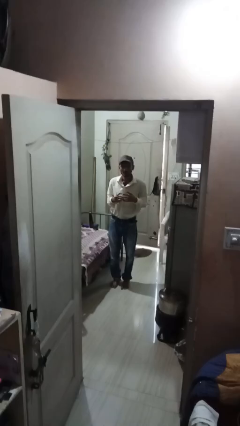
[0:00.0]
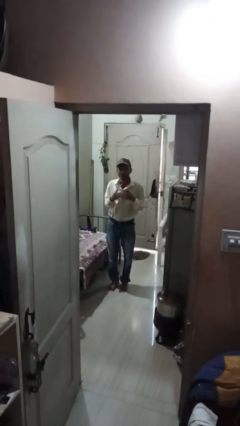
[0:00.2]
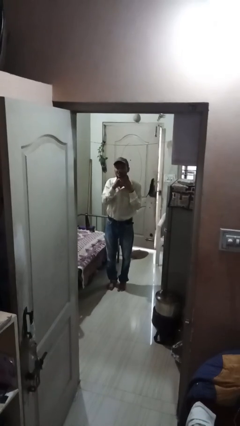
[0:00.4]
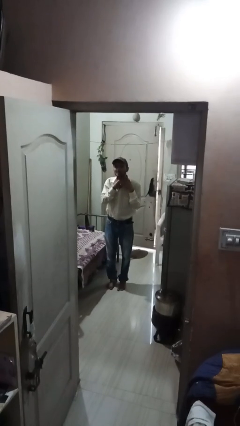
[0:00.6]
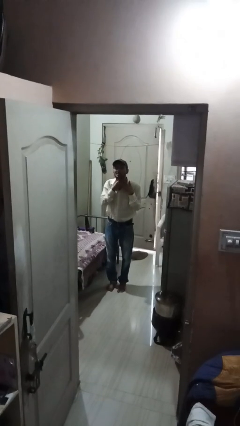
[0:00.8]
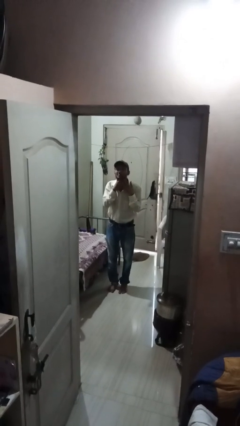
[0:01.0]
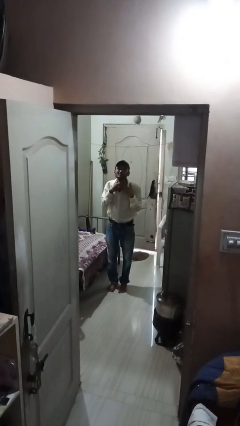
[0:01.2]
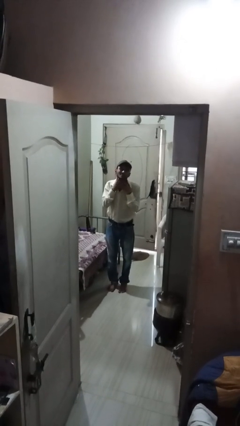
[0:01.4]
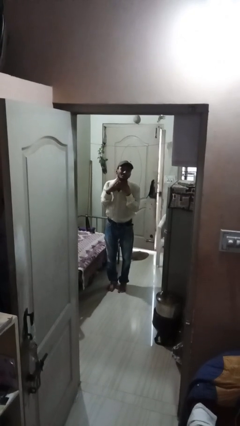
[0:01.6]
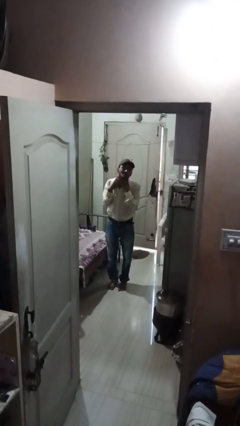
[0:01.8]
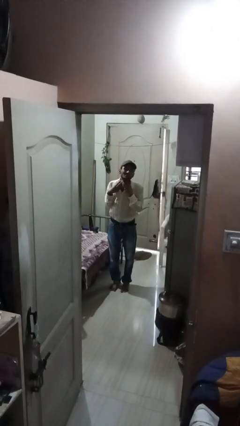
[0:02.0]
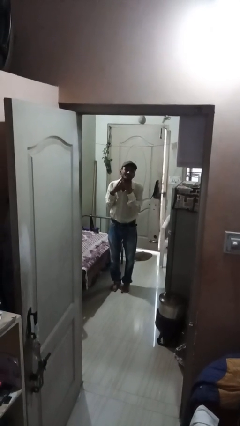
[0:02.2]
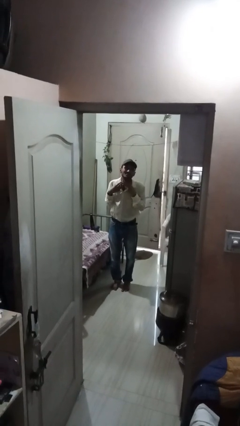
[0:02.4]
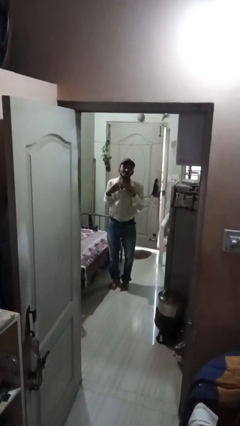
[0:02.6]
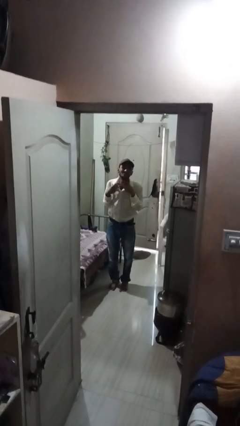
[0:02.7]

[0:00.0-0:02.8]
person rubs neck

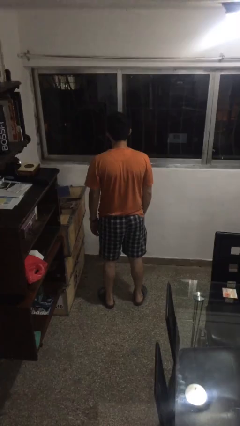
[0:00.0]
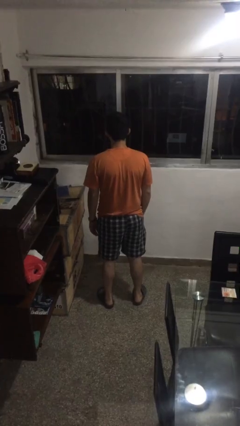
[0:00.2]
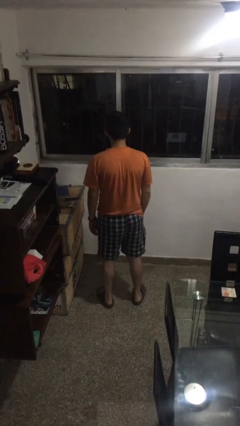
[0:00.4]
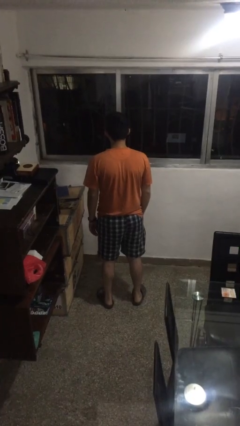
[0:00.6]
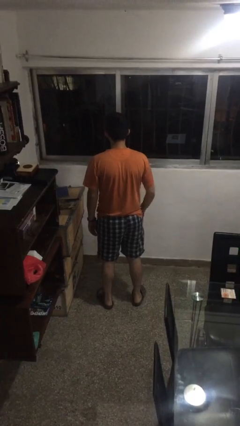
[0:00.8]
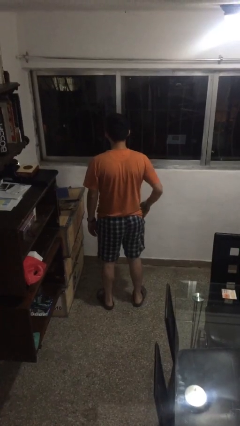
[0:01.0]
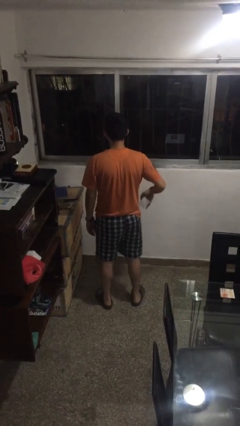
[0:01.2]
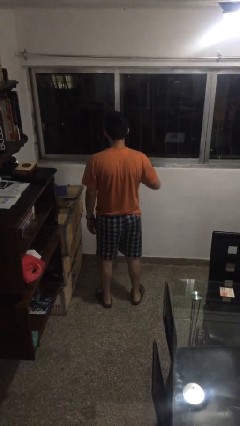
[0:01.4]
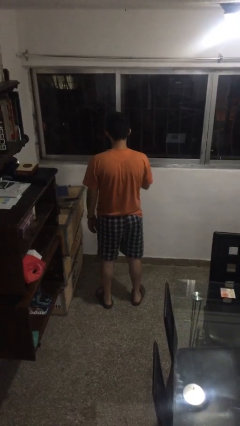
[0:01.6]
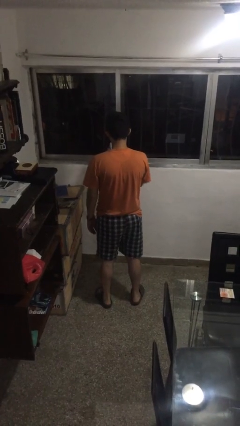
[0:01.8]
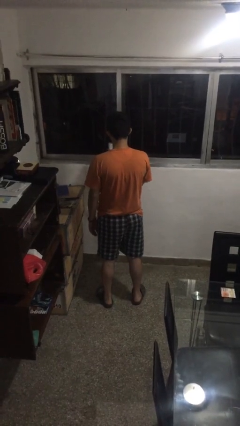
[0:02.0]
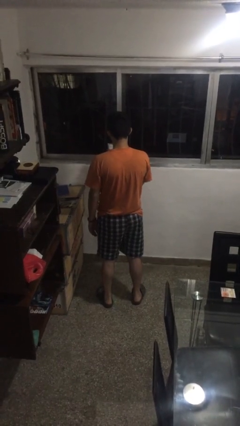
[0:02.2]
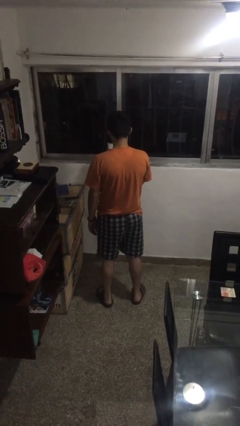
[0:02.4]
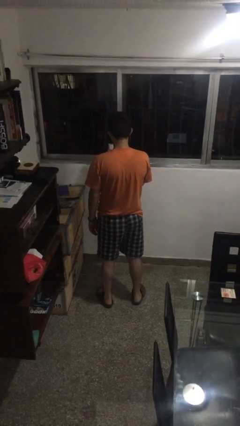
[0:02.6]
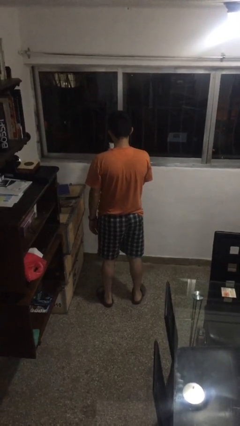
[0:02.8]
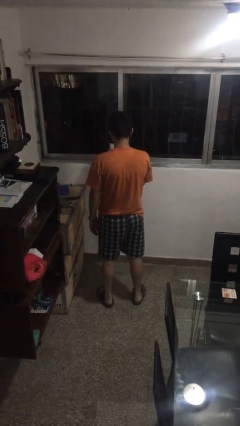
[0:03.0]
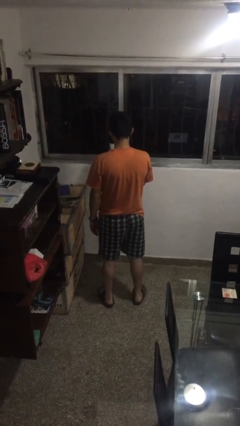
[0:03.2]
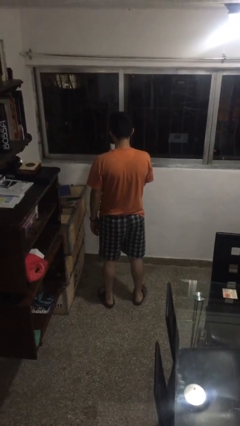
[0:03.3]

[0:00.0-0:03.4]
person takes phone from pocket

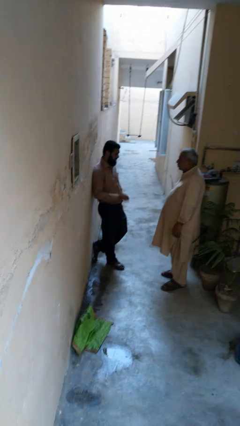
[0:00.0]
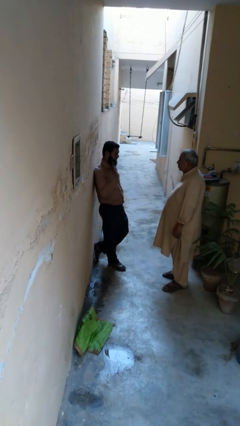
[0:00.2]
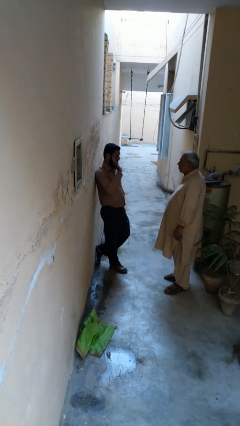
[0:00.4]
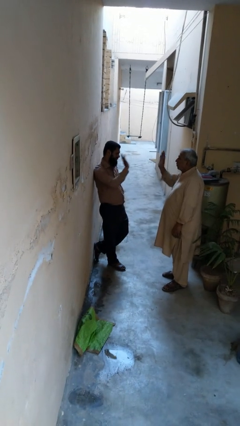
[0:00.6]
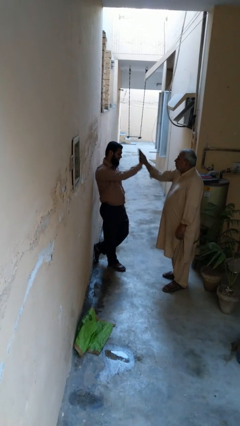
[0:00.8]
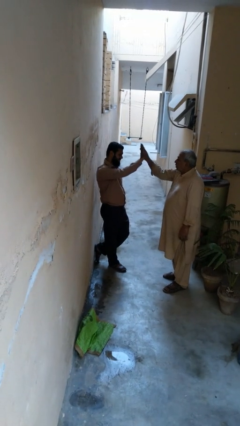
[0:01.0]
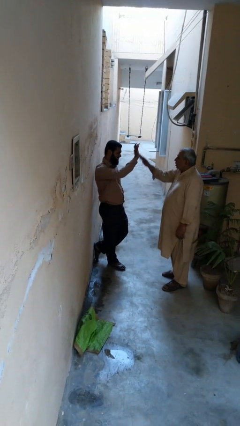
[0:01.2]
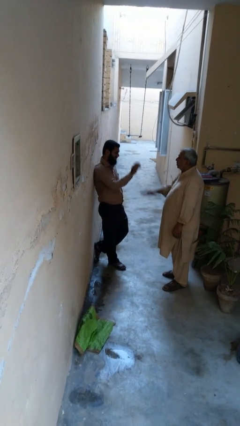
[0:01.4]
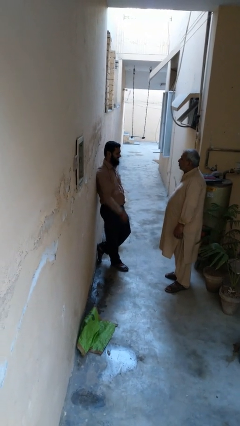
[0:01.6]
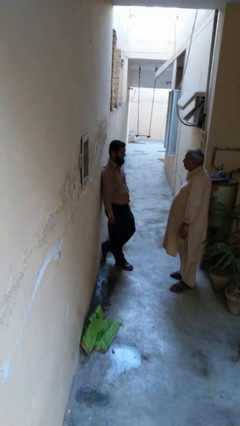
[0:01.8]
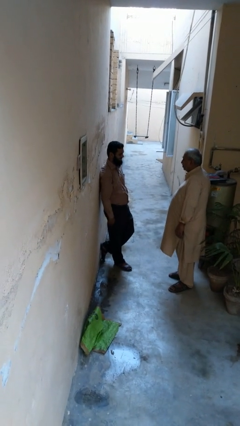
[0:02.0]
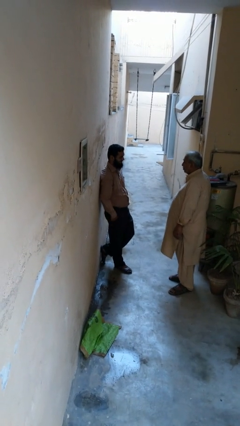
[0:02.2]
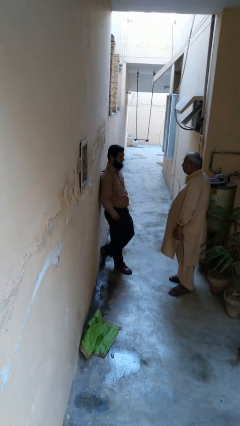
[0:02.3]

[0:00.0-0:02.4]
person highfives hand

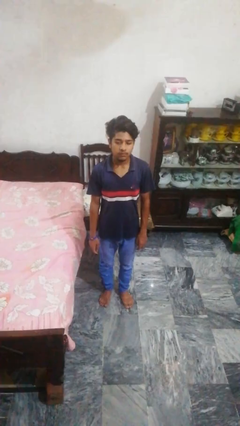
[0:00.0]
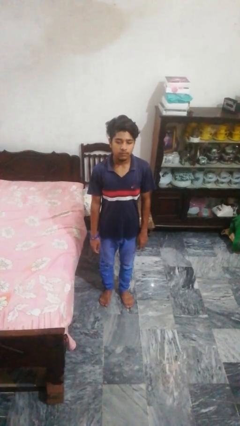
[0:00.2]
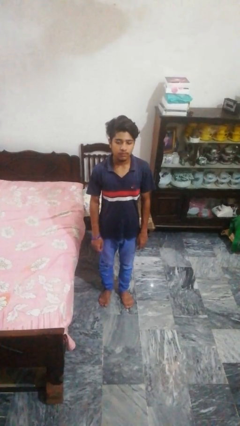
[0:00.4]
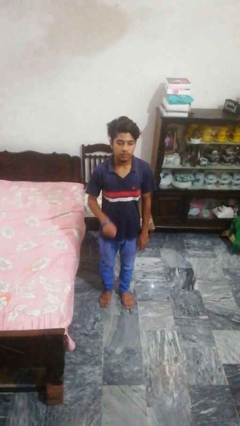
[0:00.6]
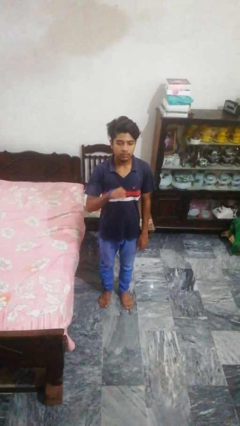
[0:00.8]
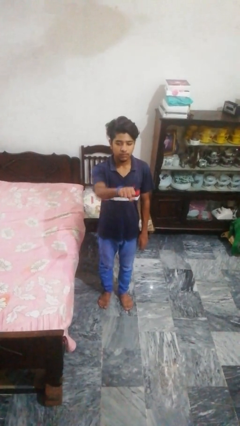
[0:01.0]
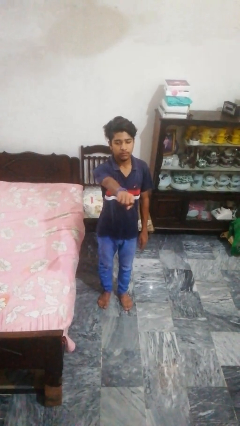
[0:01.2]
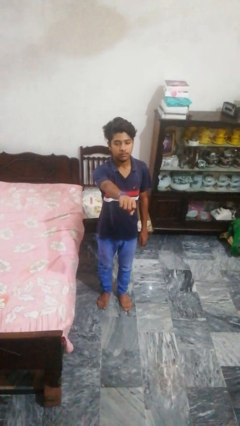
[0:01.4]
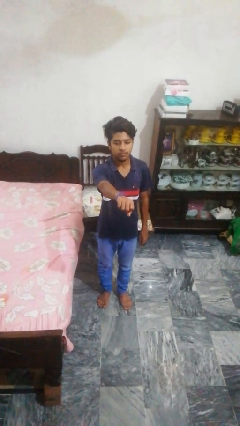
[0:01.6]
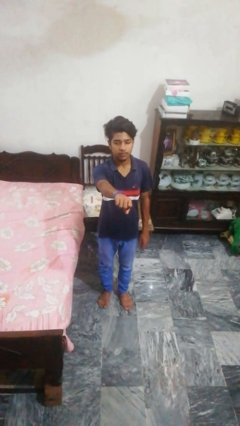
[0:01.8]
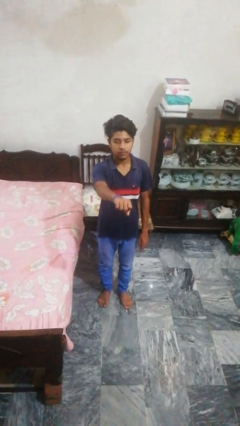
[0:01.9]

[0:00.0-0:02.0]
person punches

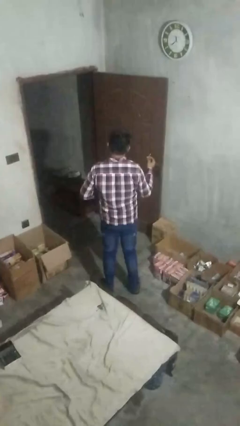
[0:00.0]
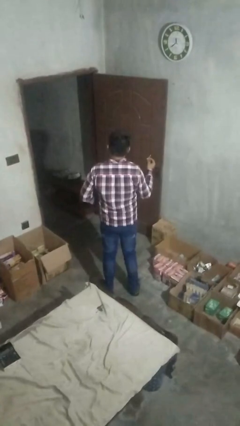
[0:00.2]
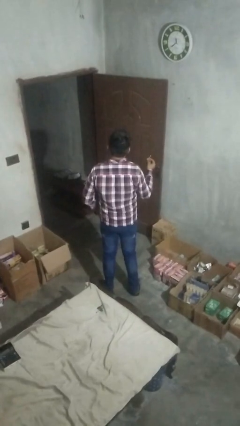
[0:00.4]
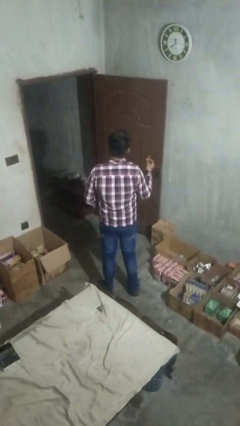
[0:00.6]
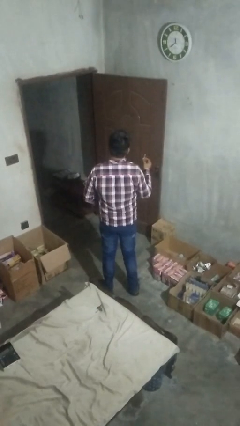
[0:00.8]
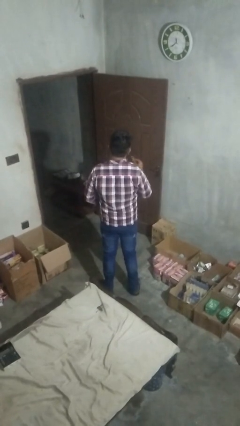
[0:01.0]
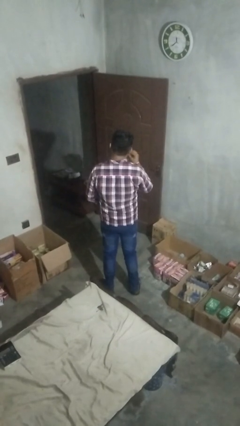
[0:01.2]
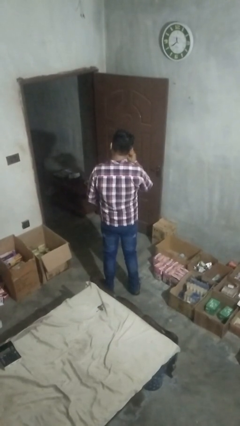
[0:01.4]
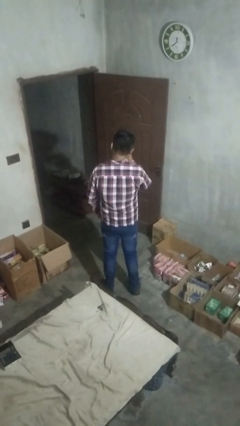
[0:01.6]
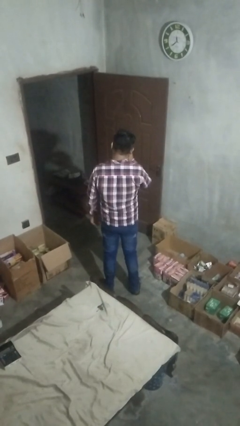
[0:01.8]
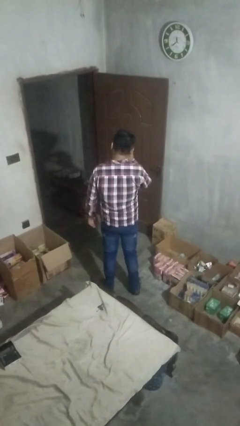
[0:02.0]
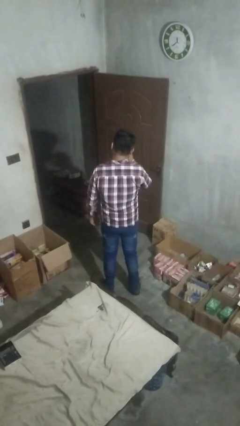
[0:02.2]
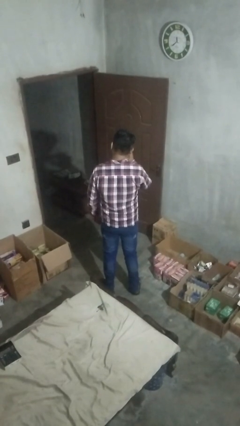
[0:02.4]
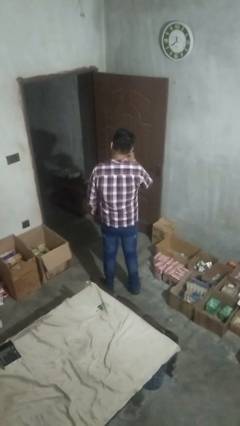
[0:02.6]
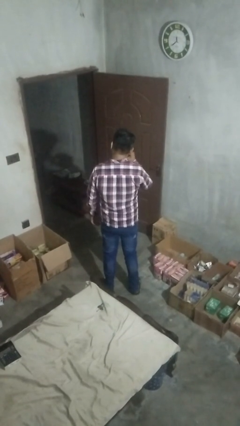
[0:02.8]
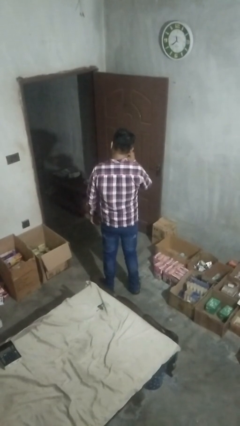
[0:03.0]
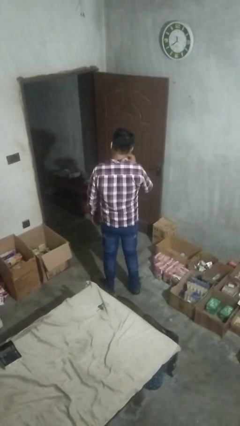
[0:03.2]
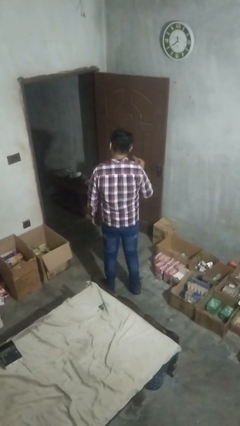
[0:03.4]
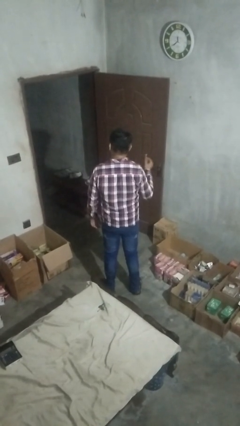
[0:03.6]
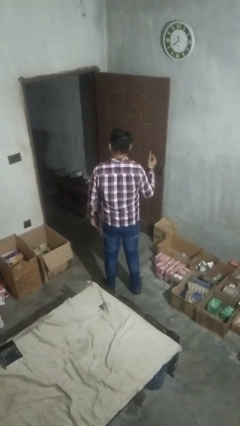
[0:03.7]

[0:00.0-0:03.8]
person flosses

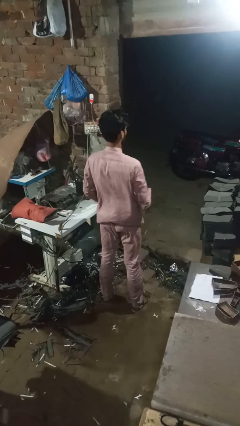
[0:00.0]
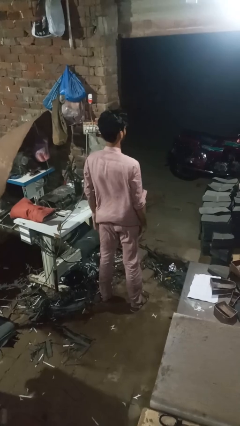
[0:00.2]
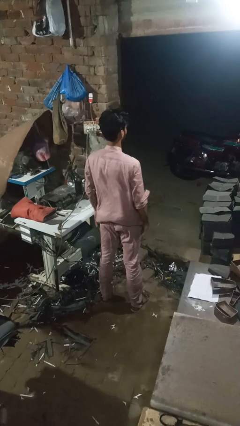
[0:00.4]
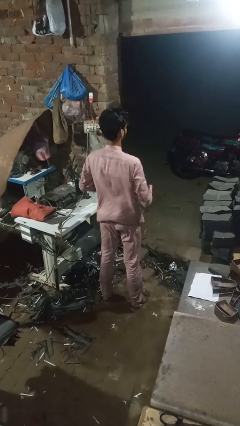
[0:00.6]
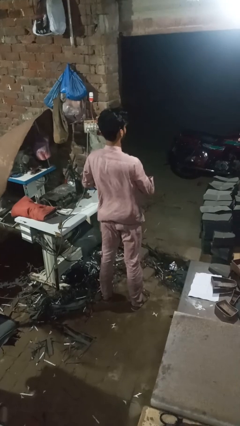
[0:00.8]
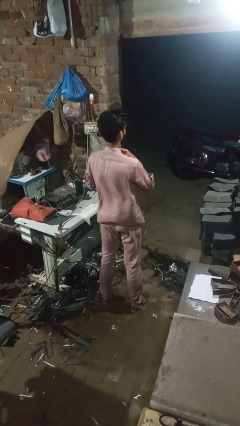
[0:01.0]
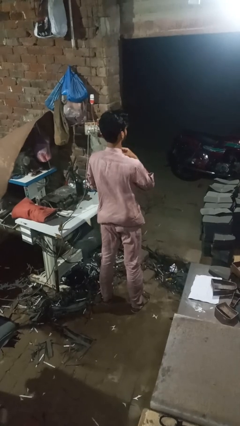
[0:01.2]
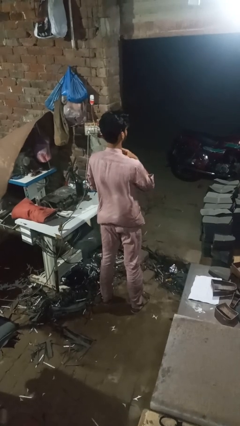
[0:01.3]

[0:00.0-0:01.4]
person unbuttons shirt

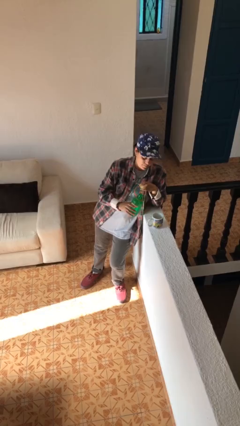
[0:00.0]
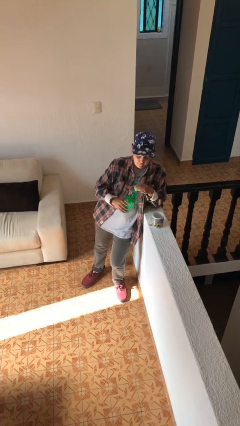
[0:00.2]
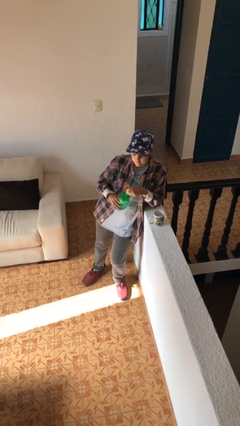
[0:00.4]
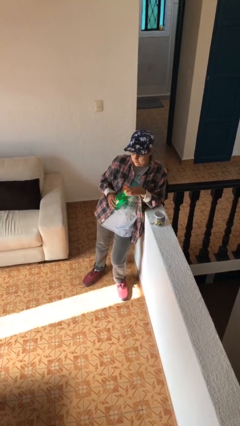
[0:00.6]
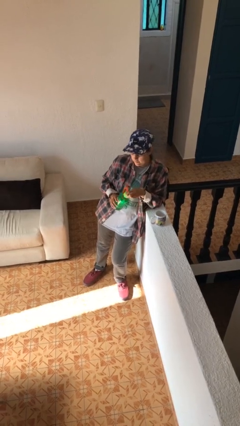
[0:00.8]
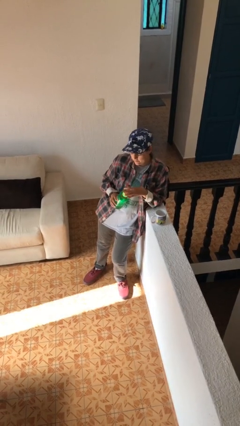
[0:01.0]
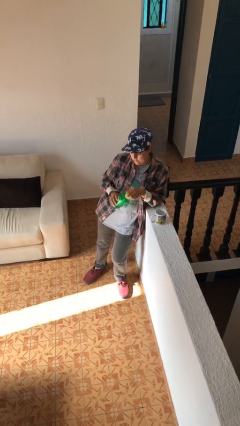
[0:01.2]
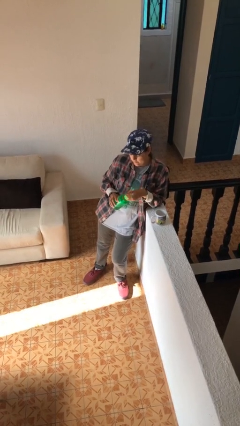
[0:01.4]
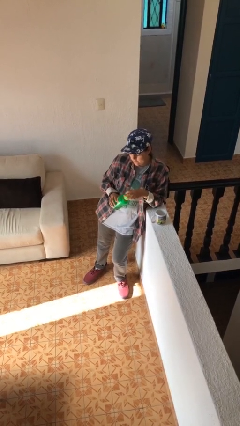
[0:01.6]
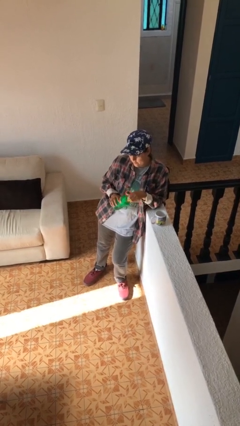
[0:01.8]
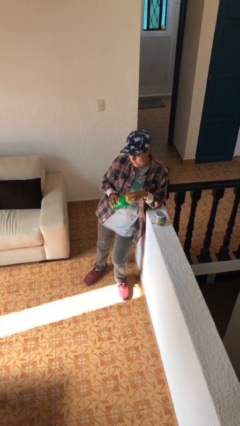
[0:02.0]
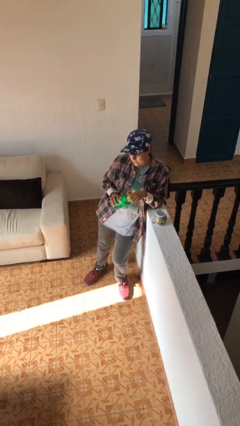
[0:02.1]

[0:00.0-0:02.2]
person screws lid to bottle
